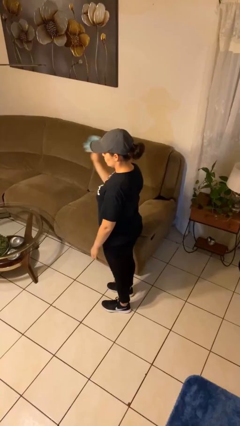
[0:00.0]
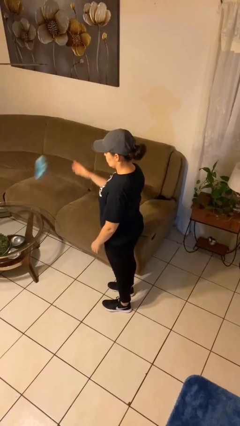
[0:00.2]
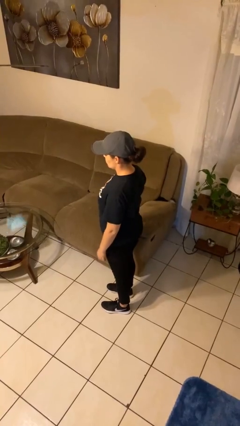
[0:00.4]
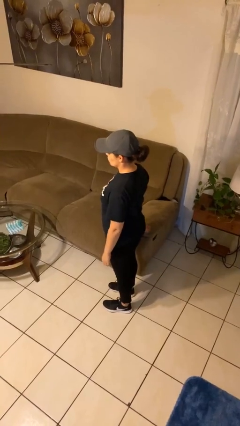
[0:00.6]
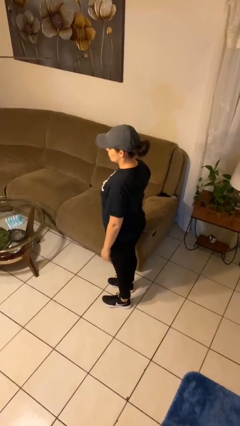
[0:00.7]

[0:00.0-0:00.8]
person throws object on table

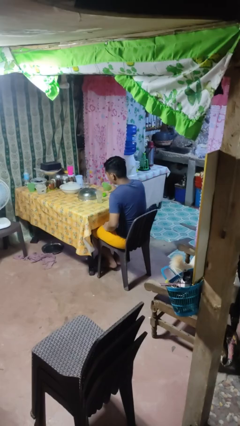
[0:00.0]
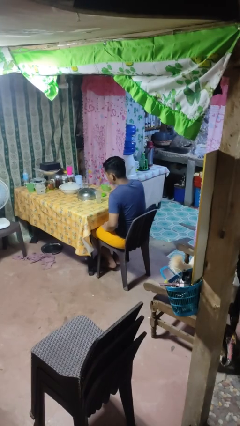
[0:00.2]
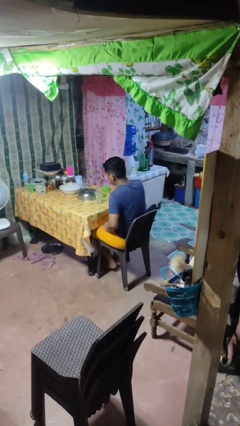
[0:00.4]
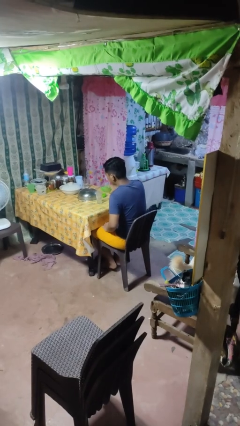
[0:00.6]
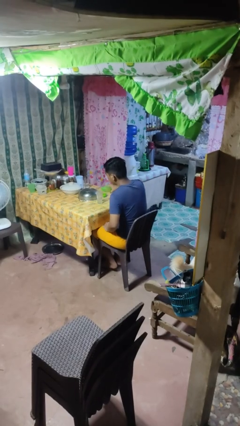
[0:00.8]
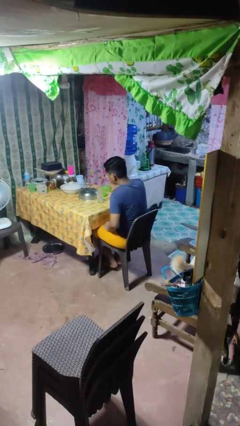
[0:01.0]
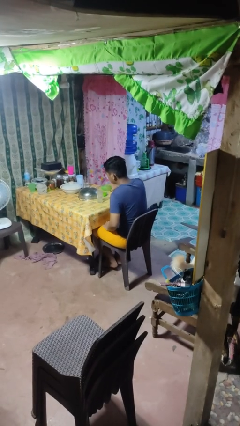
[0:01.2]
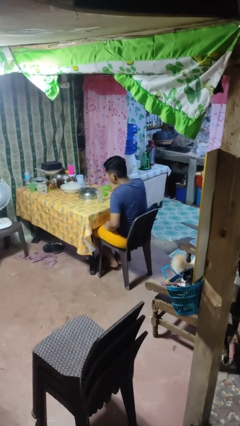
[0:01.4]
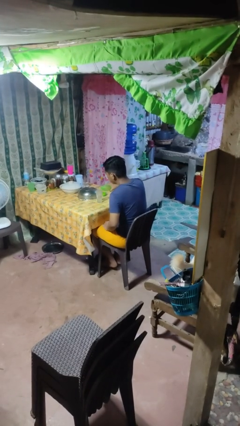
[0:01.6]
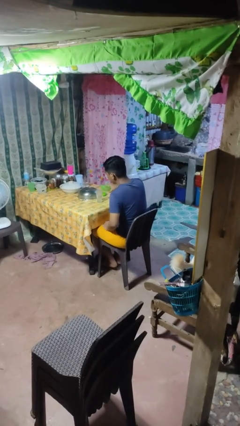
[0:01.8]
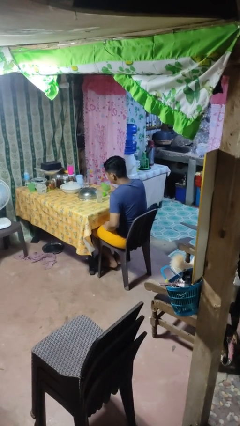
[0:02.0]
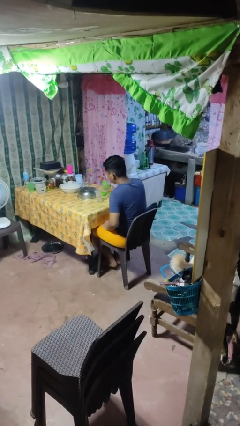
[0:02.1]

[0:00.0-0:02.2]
person pours liquid into cup

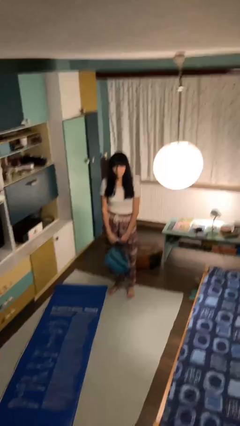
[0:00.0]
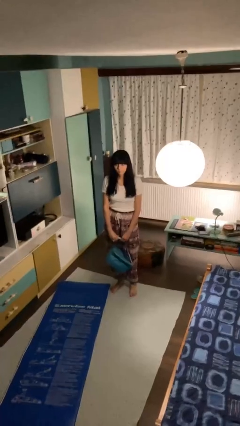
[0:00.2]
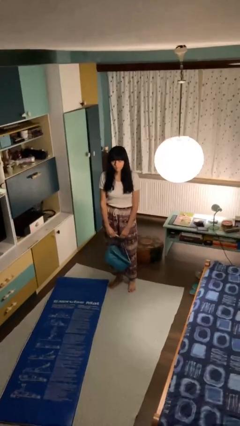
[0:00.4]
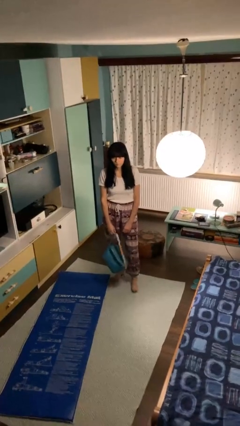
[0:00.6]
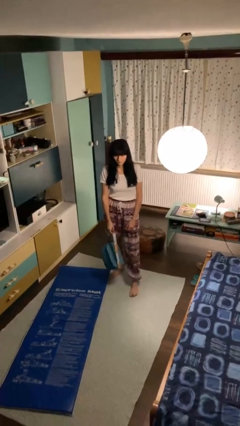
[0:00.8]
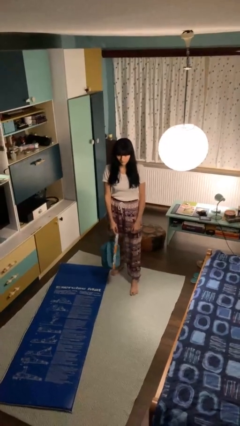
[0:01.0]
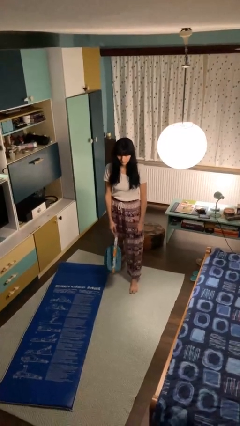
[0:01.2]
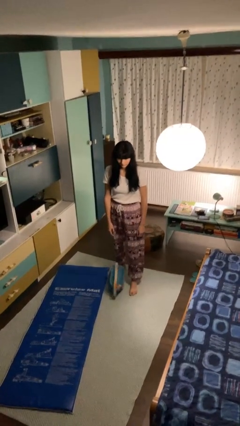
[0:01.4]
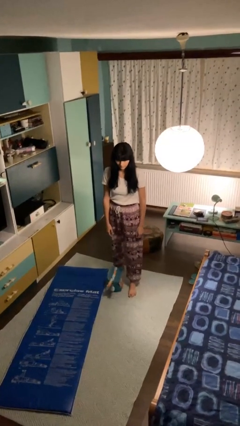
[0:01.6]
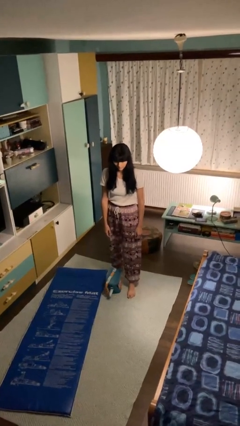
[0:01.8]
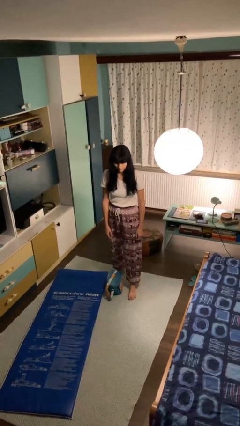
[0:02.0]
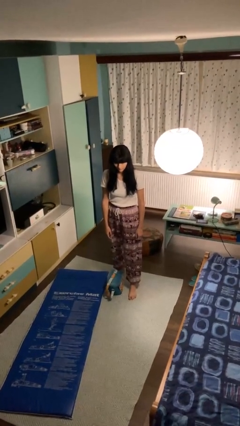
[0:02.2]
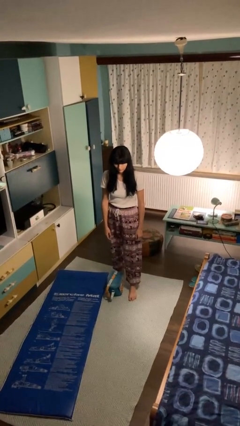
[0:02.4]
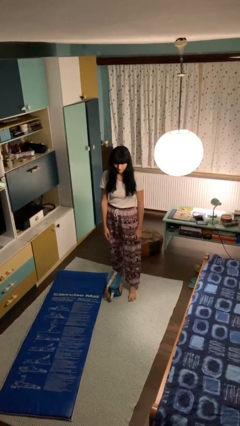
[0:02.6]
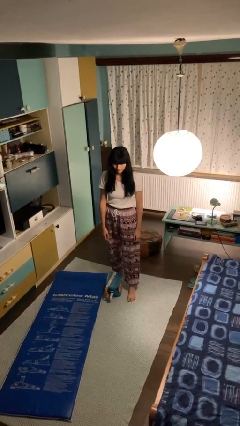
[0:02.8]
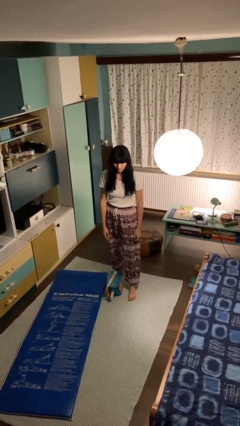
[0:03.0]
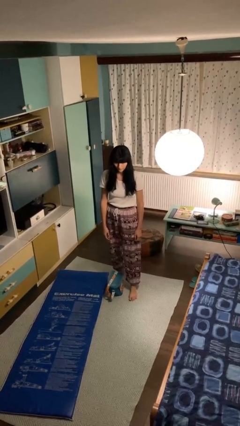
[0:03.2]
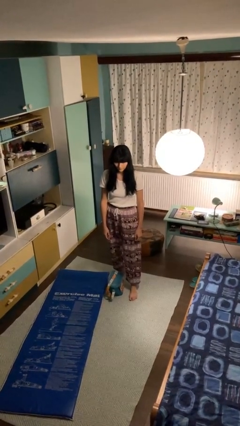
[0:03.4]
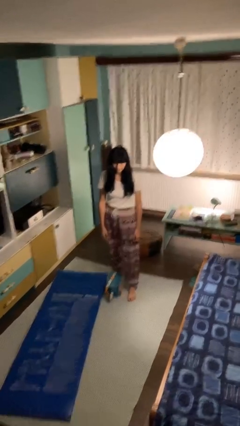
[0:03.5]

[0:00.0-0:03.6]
person drops object

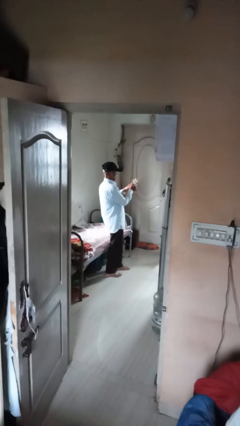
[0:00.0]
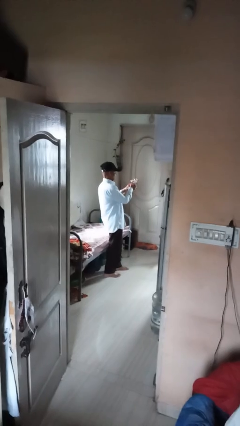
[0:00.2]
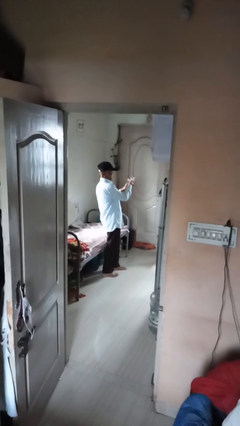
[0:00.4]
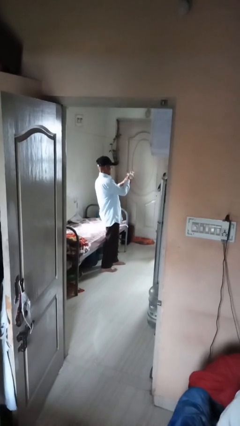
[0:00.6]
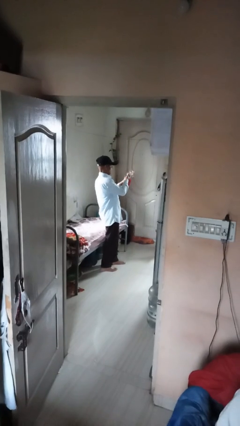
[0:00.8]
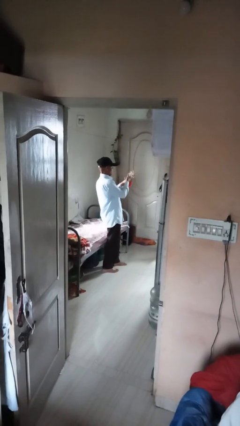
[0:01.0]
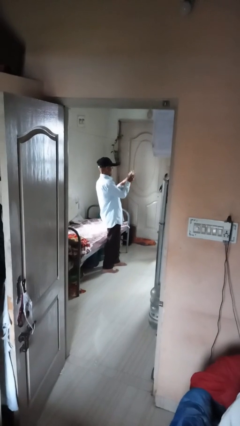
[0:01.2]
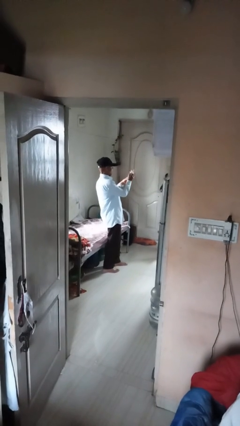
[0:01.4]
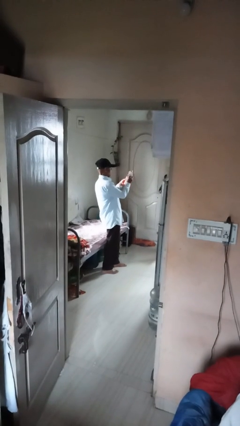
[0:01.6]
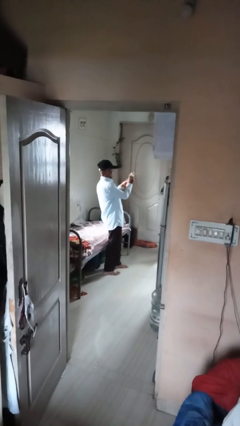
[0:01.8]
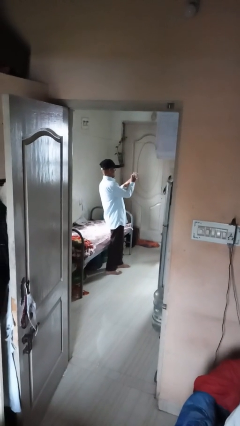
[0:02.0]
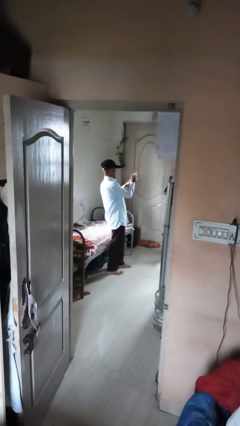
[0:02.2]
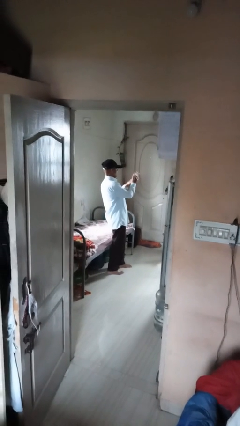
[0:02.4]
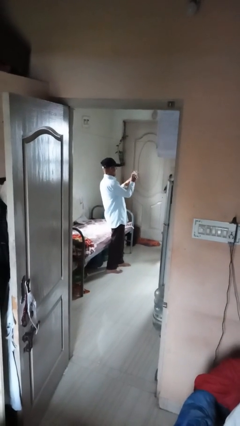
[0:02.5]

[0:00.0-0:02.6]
person arranges flowers in vase

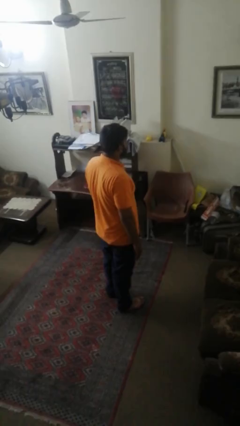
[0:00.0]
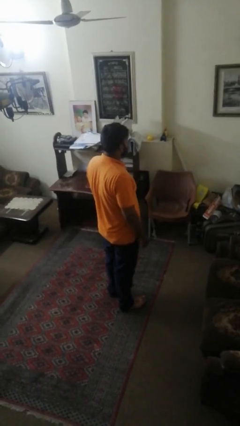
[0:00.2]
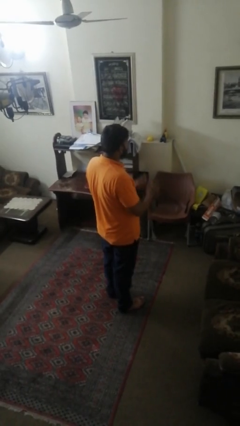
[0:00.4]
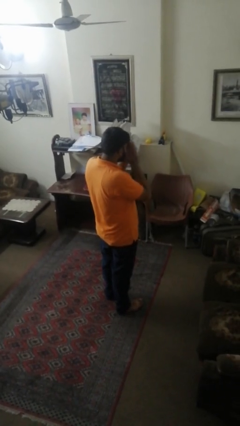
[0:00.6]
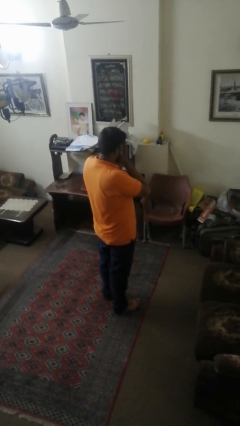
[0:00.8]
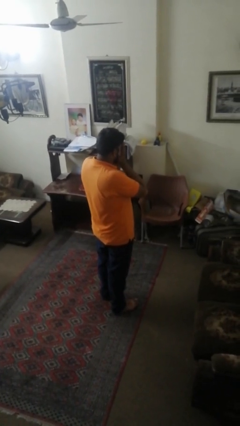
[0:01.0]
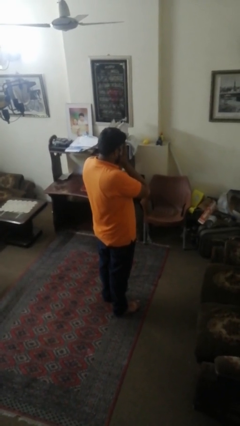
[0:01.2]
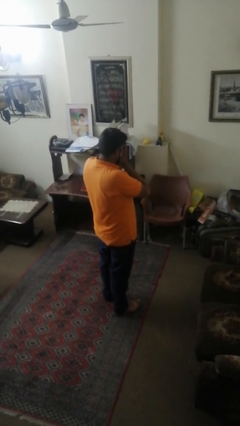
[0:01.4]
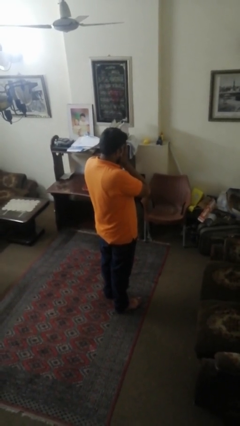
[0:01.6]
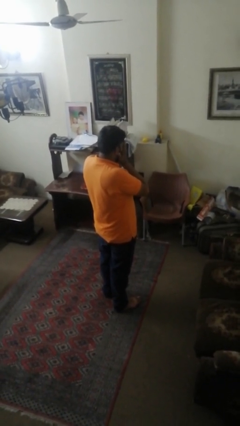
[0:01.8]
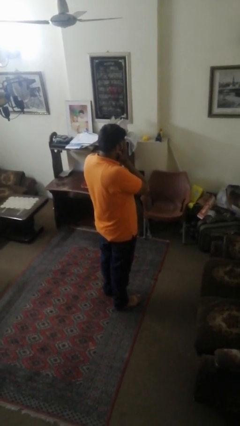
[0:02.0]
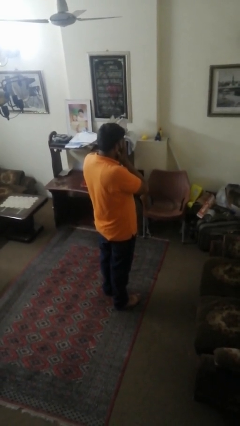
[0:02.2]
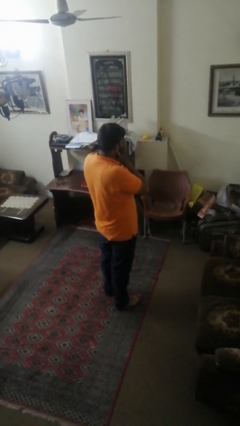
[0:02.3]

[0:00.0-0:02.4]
person covers face with hands

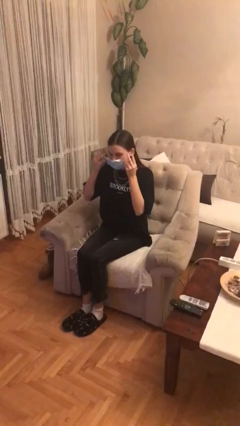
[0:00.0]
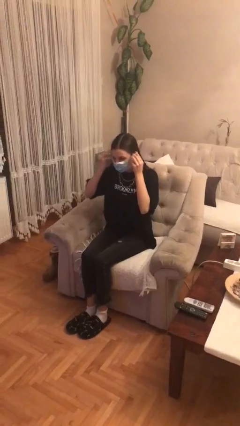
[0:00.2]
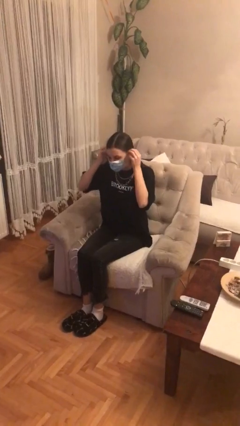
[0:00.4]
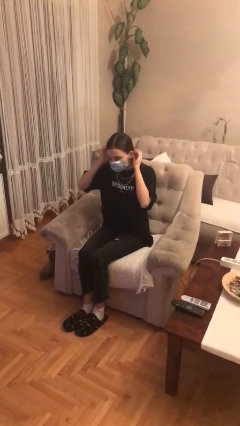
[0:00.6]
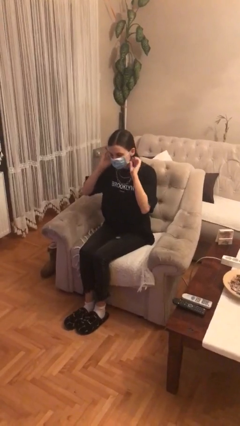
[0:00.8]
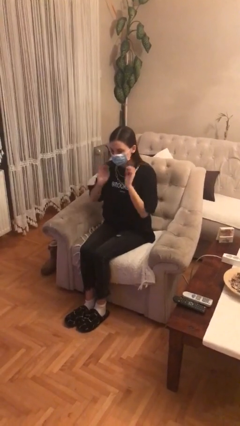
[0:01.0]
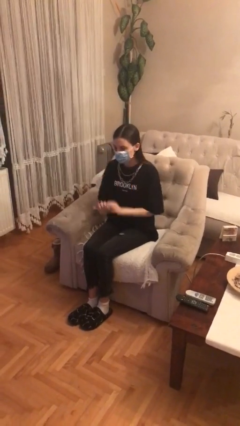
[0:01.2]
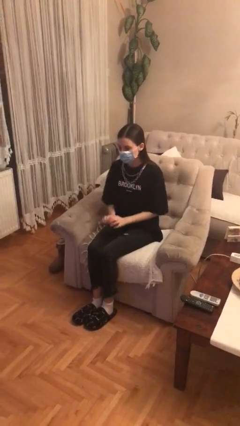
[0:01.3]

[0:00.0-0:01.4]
person puts on facemask

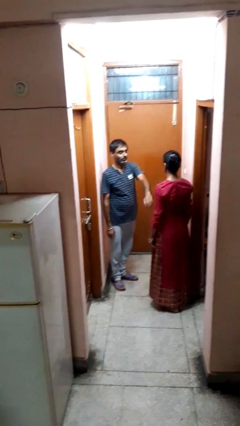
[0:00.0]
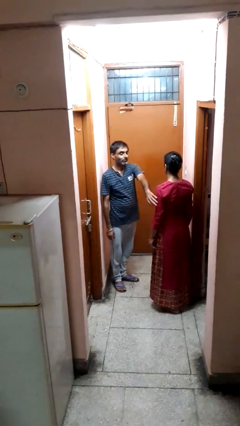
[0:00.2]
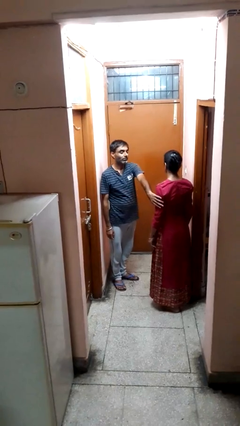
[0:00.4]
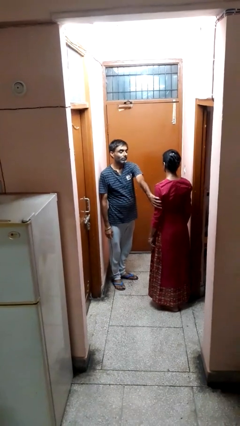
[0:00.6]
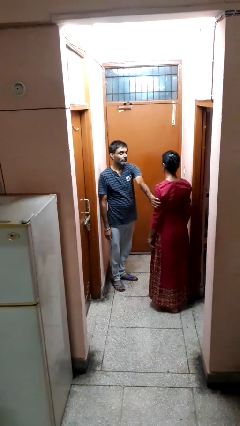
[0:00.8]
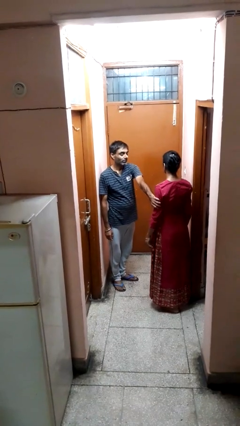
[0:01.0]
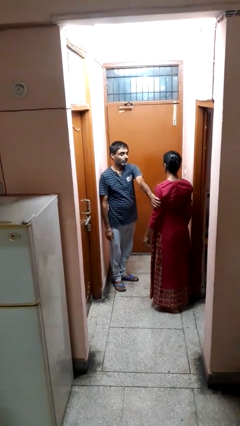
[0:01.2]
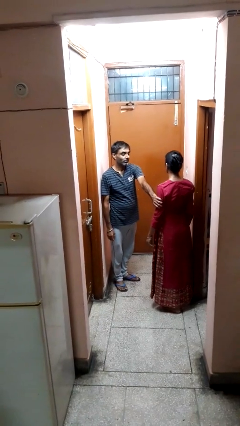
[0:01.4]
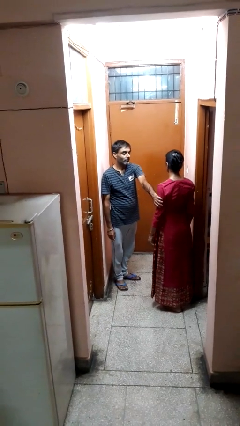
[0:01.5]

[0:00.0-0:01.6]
person grabs person by bicep

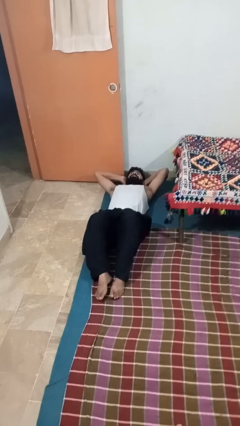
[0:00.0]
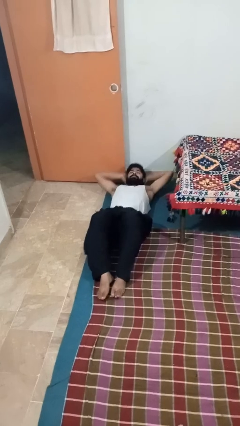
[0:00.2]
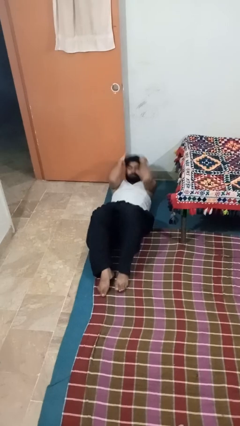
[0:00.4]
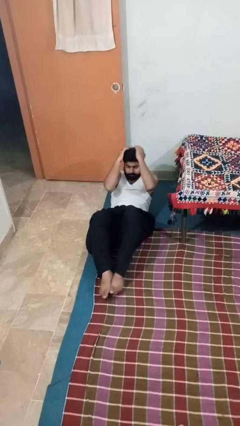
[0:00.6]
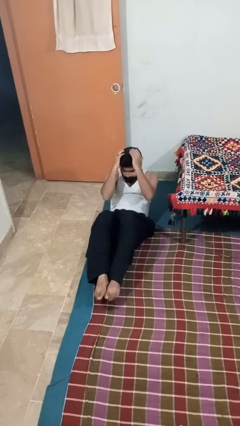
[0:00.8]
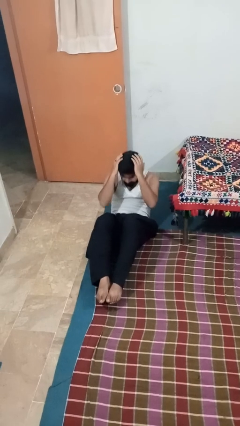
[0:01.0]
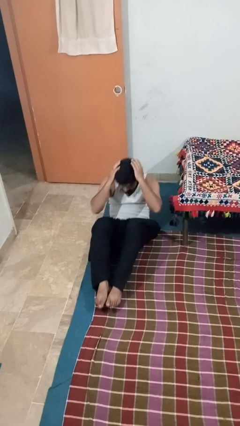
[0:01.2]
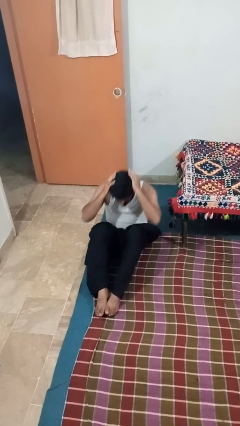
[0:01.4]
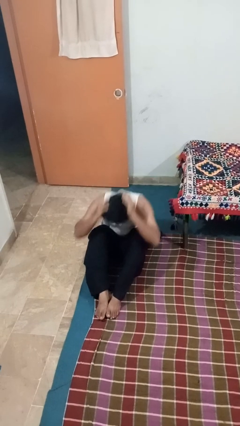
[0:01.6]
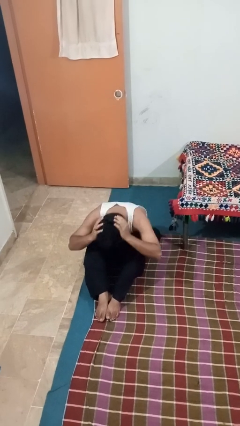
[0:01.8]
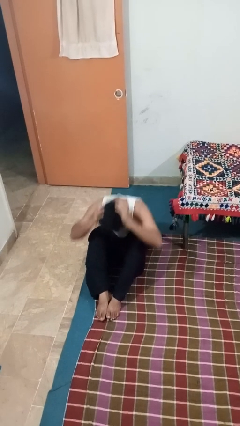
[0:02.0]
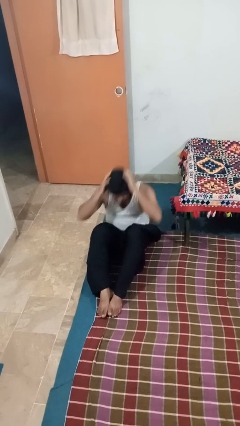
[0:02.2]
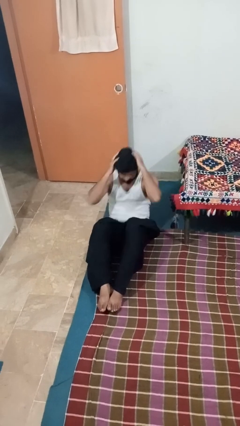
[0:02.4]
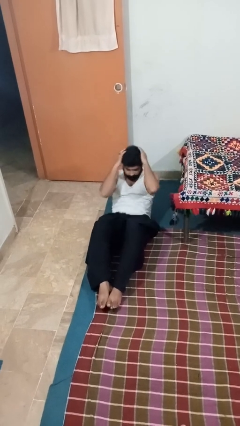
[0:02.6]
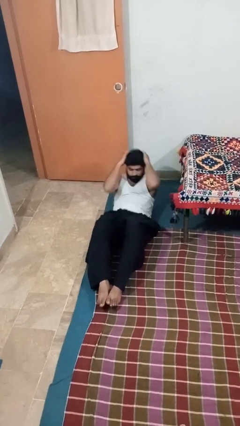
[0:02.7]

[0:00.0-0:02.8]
person exercises with situp
